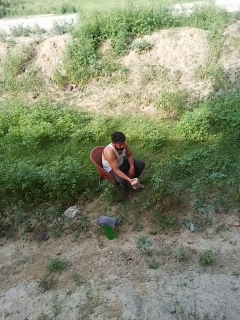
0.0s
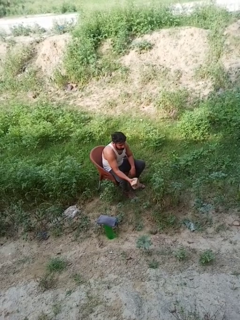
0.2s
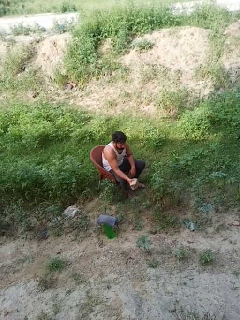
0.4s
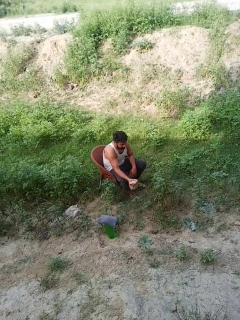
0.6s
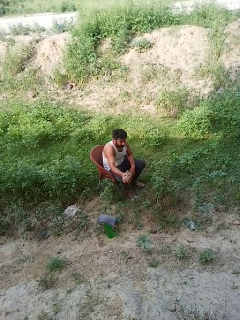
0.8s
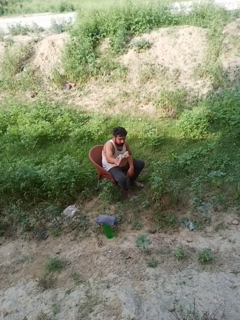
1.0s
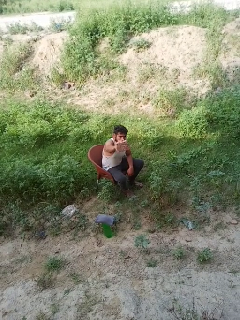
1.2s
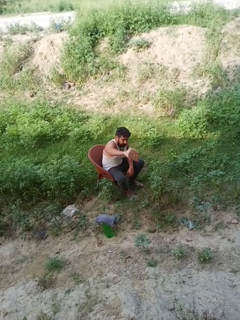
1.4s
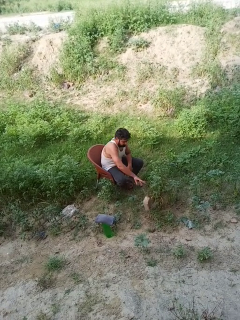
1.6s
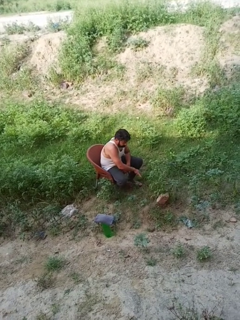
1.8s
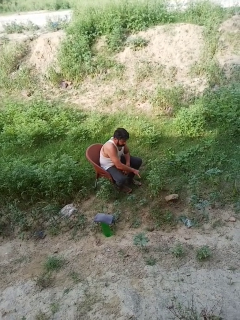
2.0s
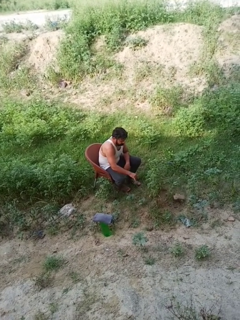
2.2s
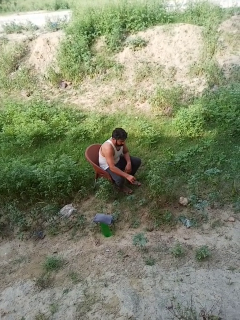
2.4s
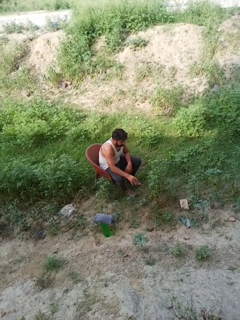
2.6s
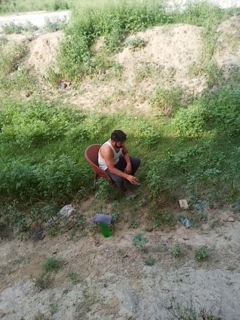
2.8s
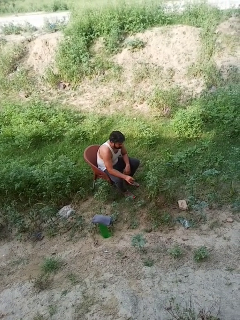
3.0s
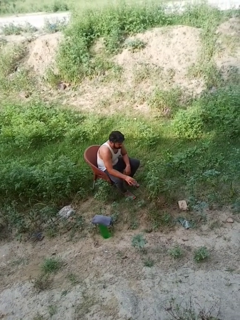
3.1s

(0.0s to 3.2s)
person throws object to ground

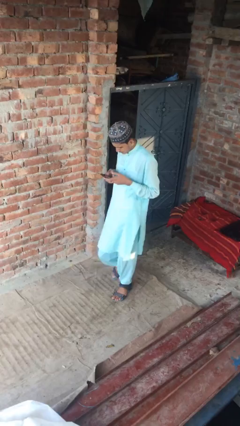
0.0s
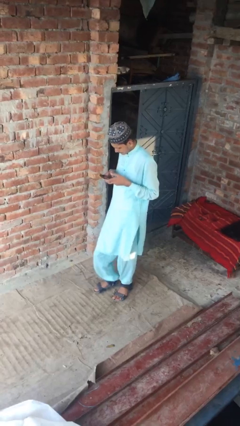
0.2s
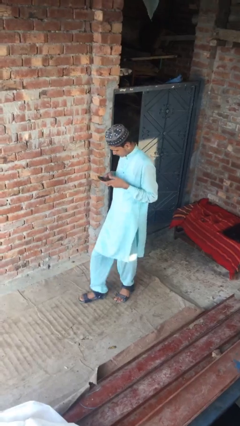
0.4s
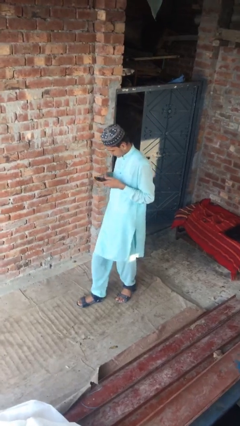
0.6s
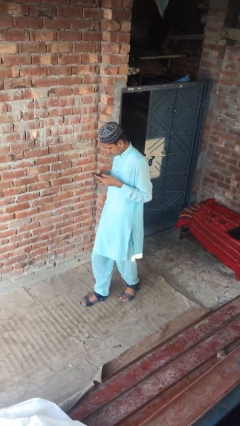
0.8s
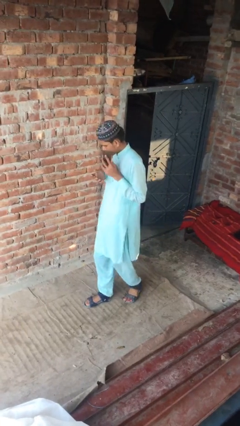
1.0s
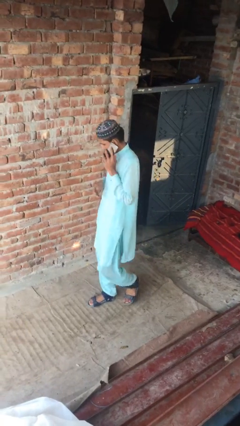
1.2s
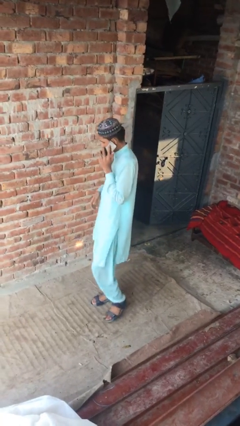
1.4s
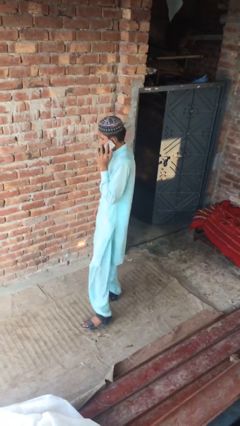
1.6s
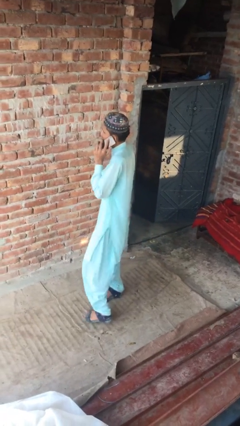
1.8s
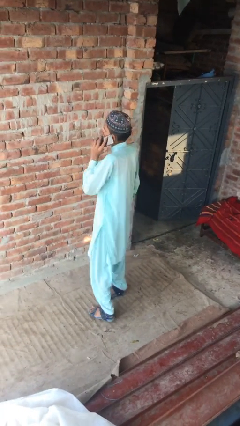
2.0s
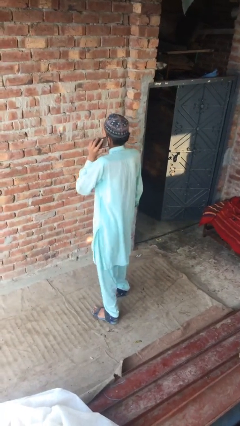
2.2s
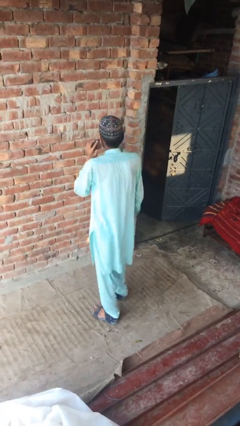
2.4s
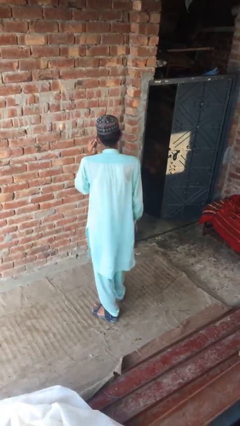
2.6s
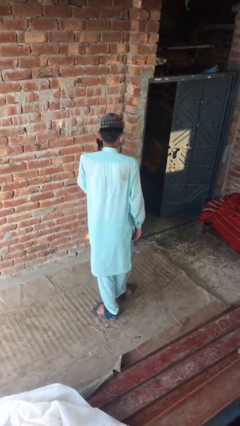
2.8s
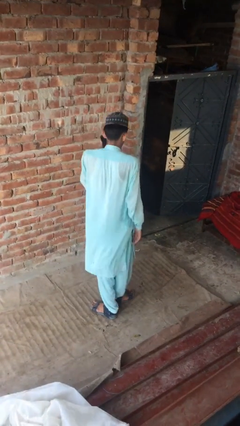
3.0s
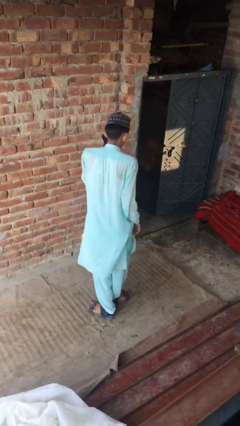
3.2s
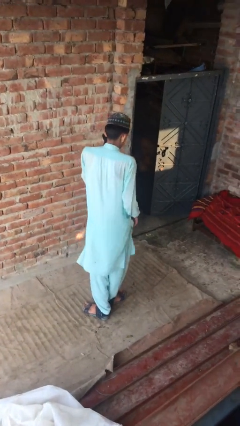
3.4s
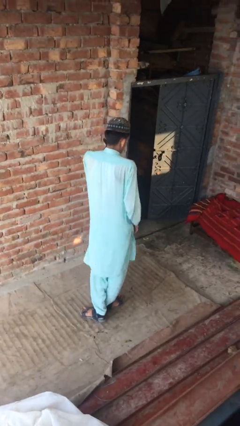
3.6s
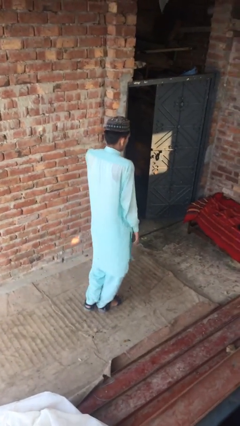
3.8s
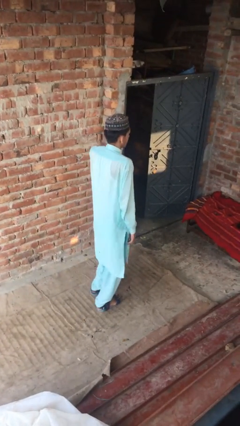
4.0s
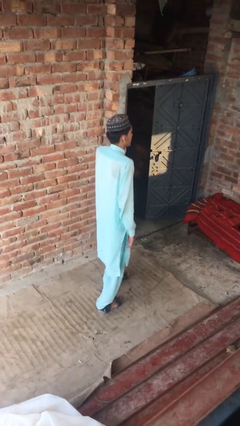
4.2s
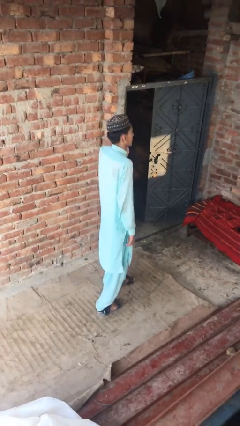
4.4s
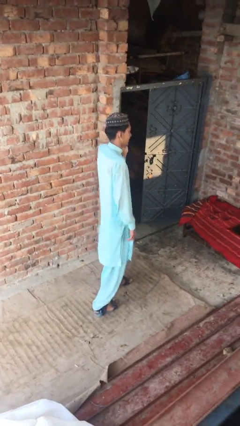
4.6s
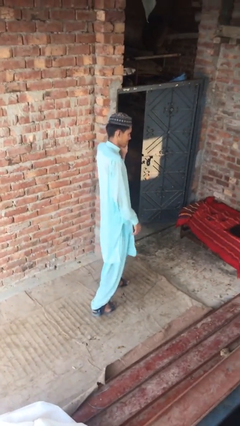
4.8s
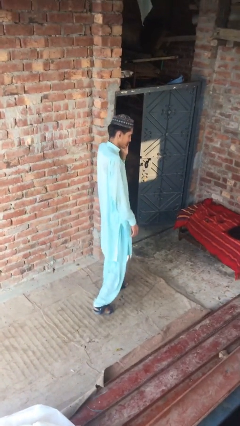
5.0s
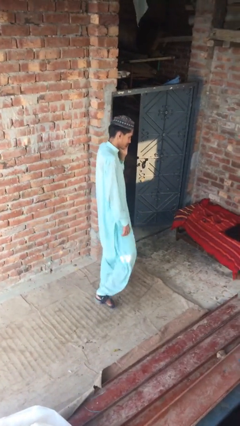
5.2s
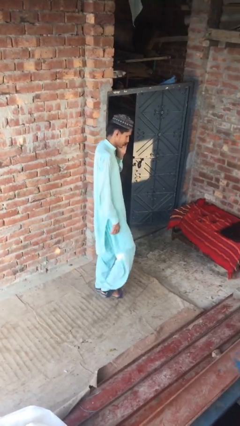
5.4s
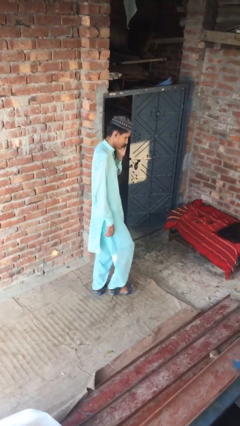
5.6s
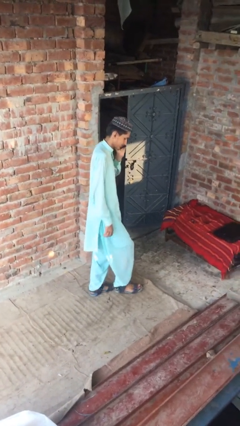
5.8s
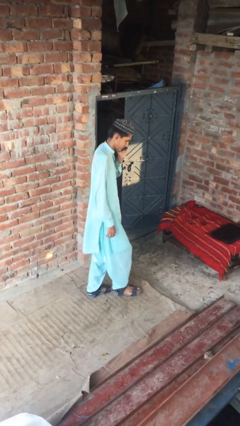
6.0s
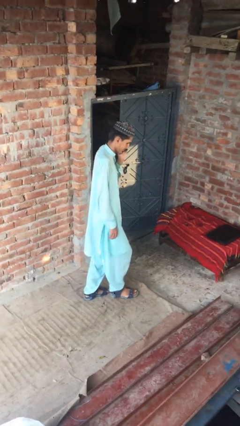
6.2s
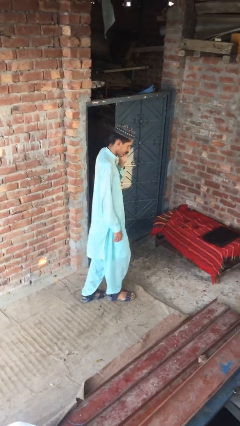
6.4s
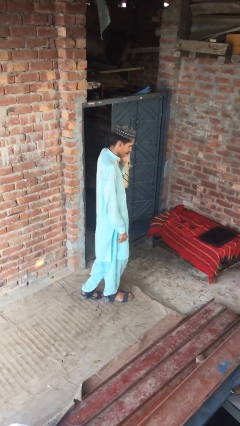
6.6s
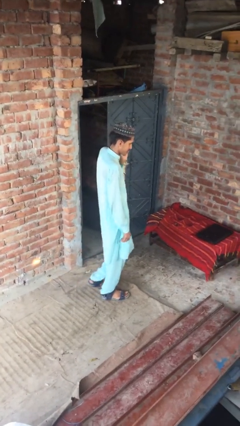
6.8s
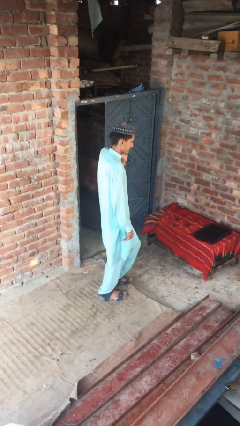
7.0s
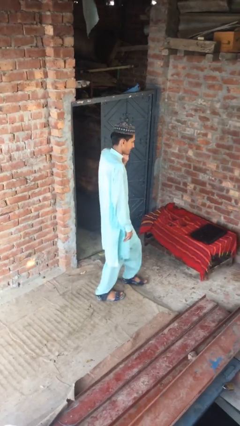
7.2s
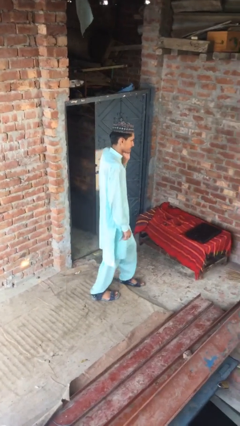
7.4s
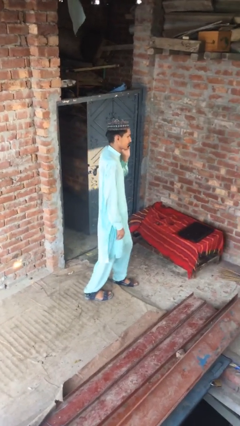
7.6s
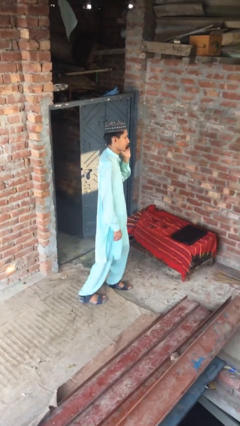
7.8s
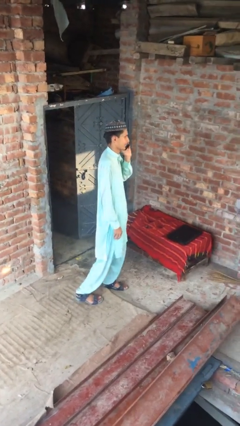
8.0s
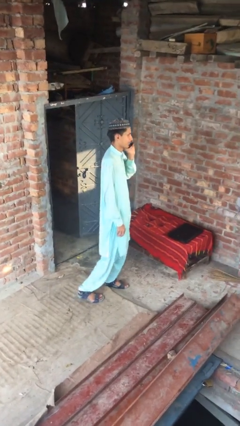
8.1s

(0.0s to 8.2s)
person talks on phone

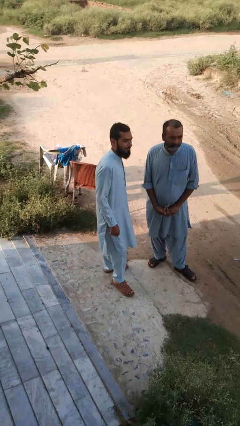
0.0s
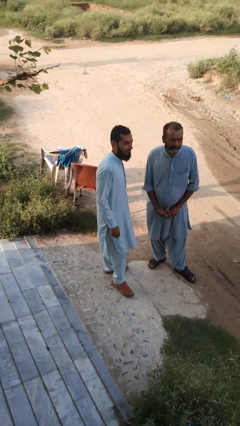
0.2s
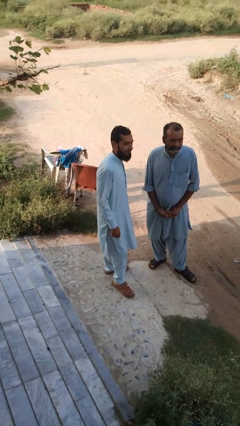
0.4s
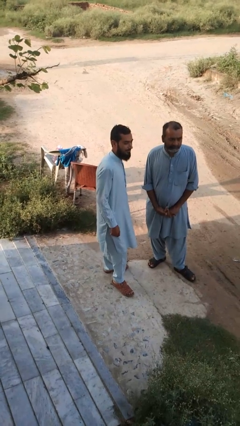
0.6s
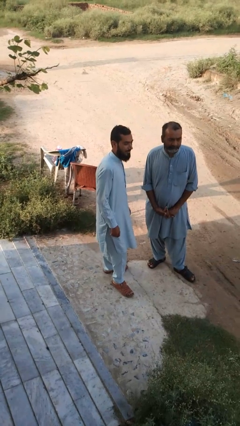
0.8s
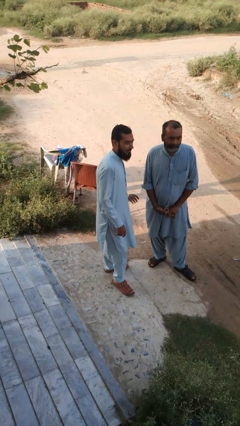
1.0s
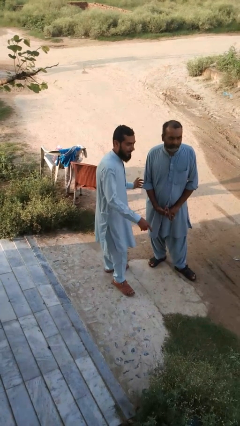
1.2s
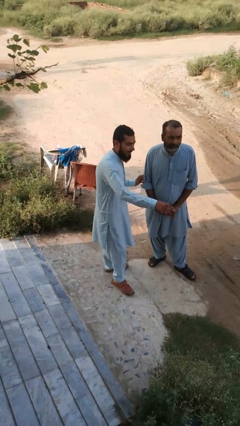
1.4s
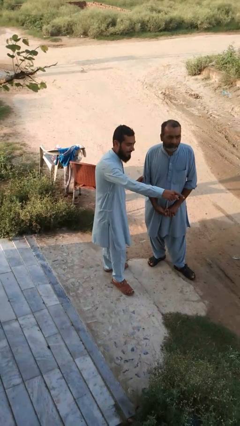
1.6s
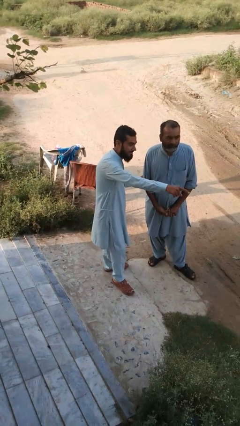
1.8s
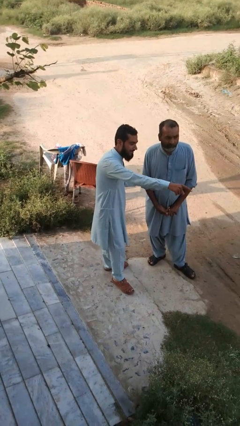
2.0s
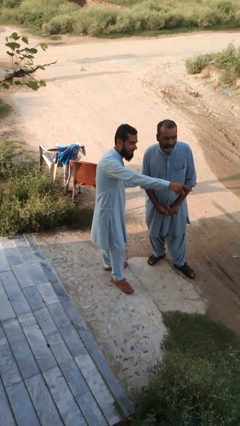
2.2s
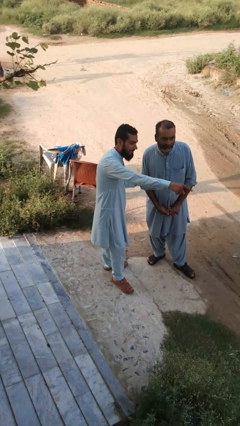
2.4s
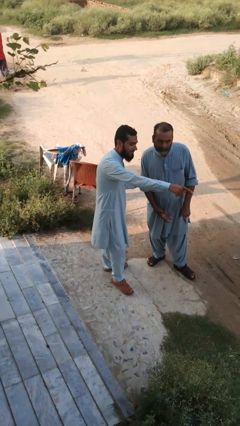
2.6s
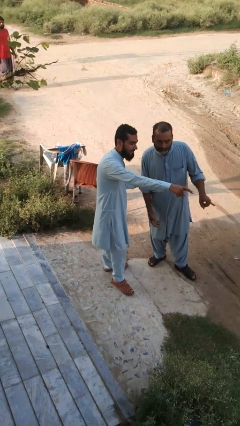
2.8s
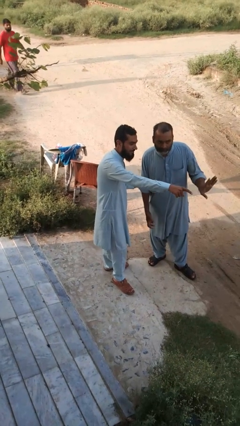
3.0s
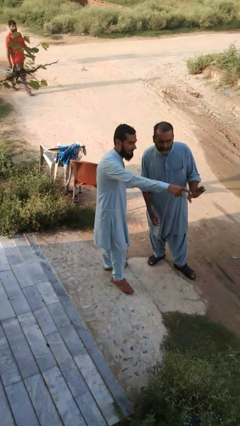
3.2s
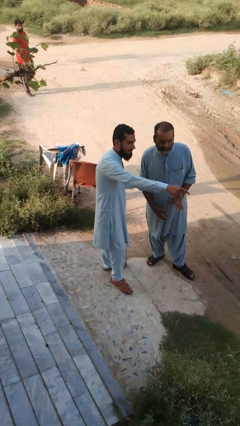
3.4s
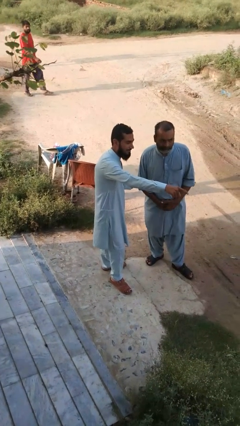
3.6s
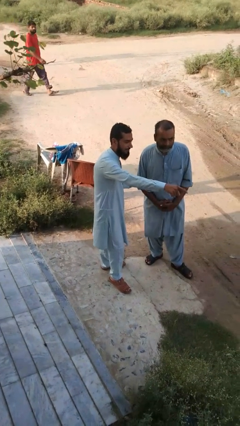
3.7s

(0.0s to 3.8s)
person points at person

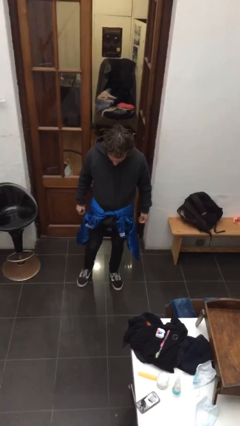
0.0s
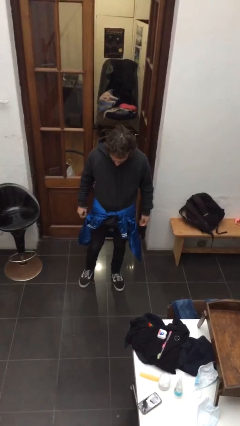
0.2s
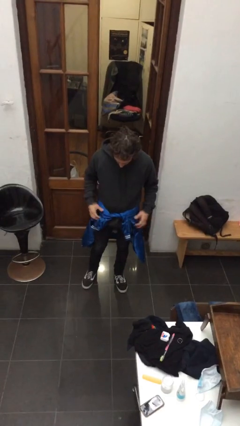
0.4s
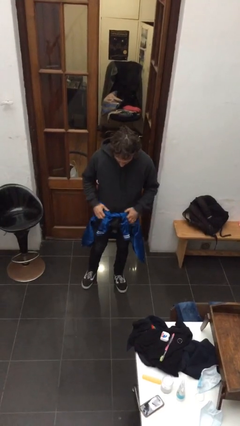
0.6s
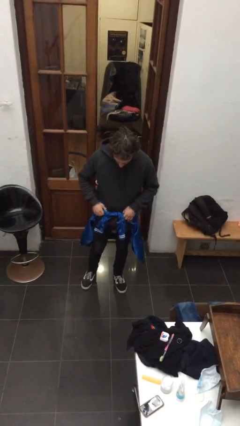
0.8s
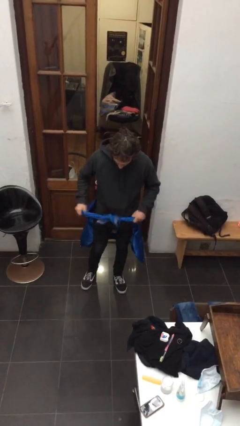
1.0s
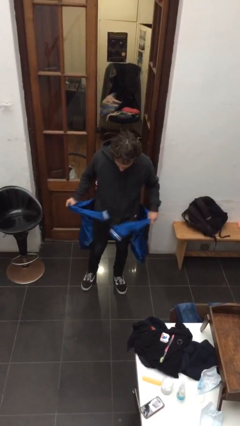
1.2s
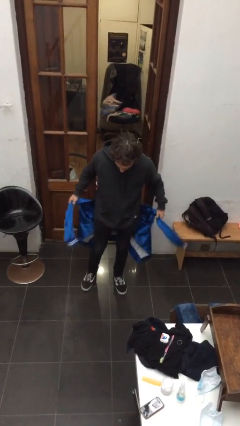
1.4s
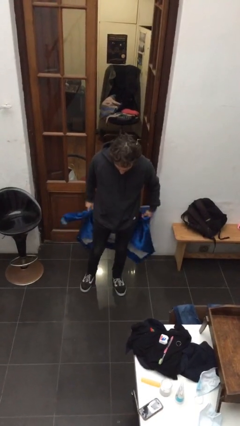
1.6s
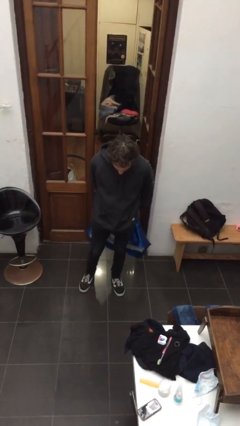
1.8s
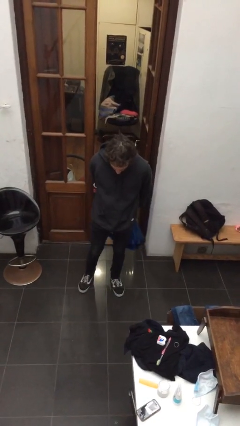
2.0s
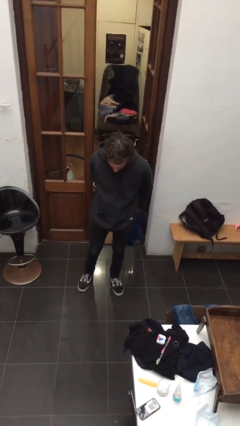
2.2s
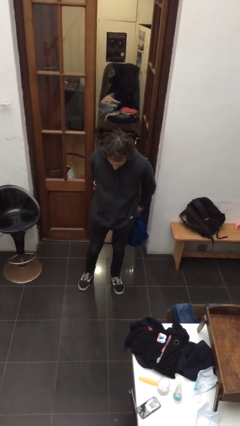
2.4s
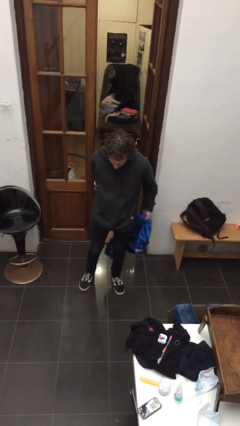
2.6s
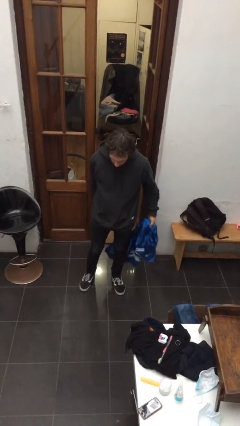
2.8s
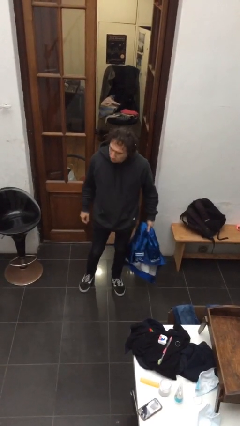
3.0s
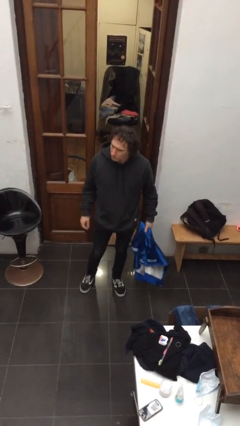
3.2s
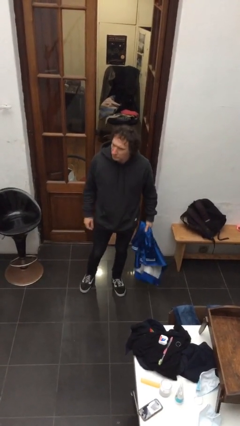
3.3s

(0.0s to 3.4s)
person unties jacket around waist

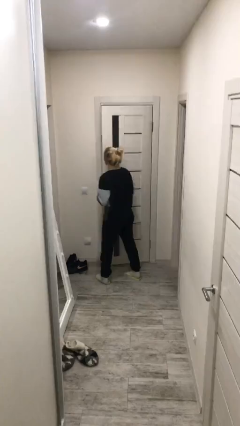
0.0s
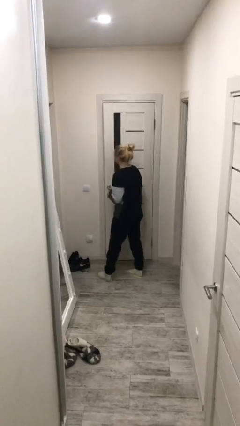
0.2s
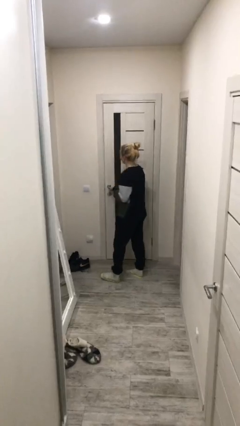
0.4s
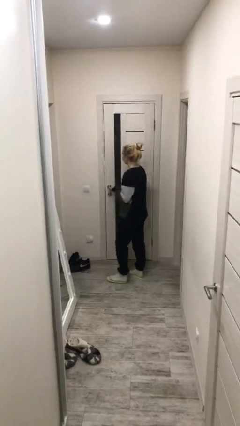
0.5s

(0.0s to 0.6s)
person closes facility door
